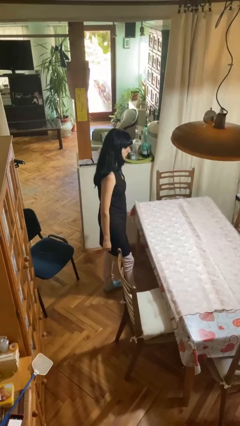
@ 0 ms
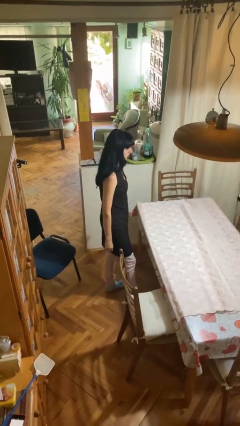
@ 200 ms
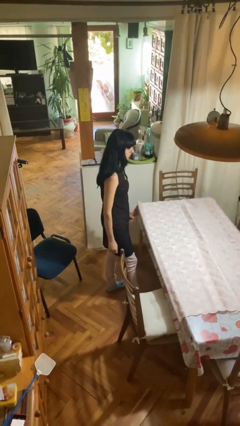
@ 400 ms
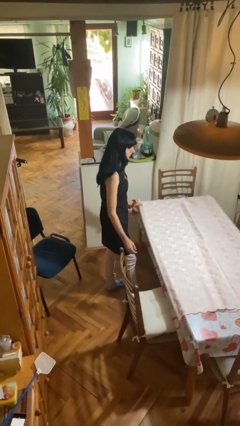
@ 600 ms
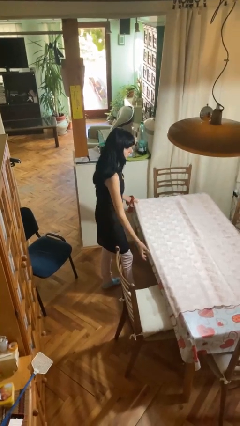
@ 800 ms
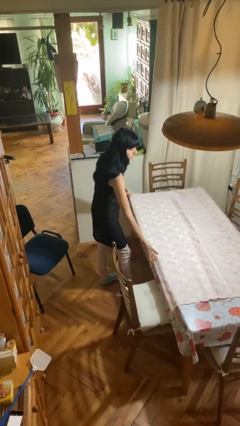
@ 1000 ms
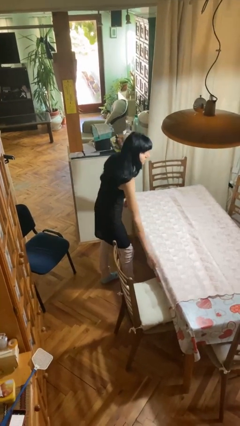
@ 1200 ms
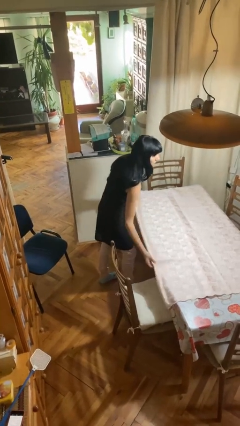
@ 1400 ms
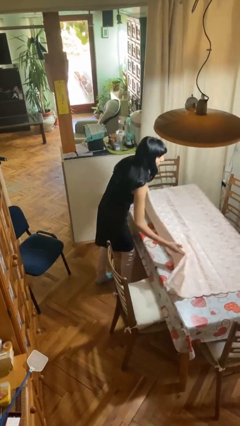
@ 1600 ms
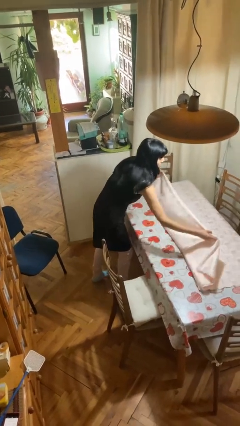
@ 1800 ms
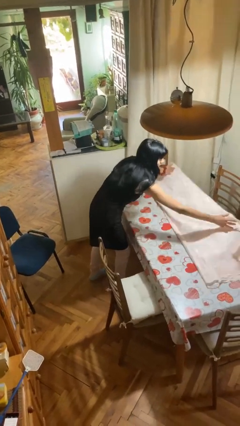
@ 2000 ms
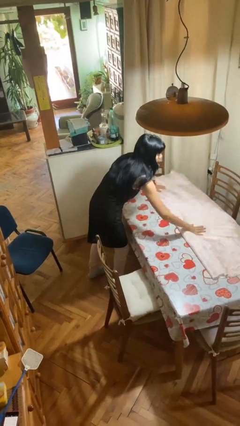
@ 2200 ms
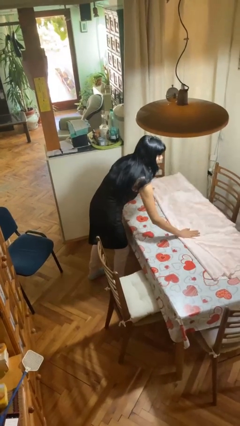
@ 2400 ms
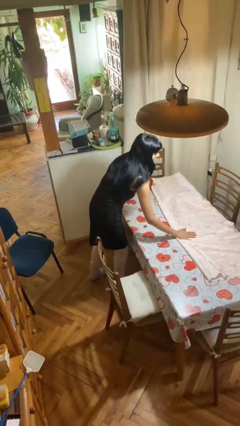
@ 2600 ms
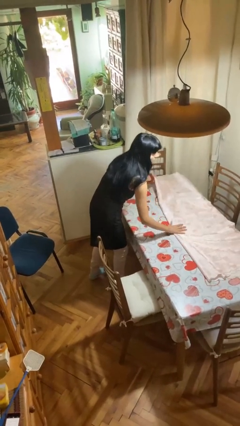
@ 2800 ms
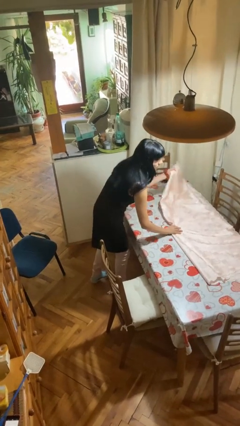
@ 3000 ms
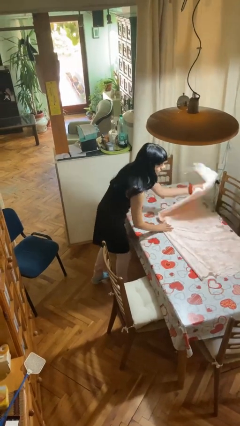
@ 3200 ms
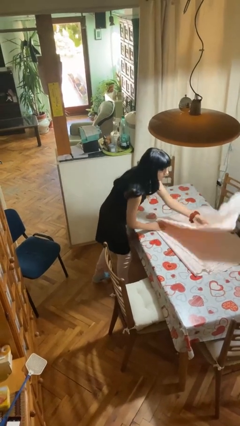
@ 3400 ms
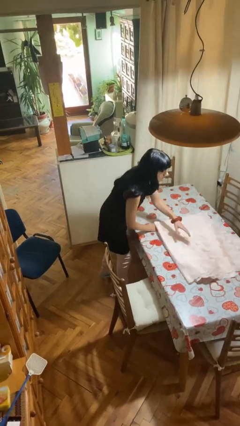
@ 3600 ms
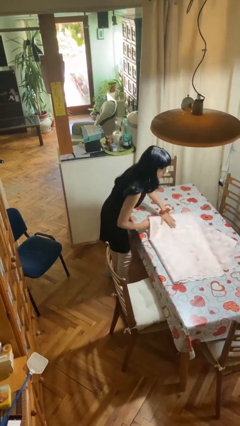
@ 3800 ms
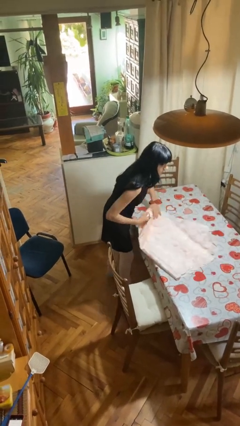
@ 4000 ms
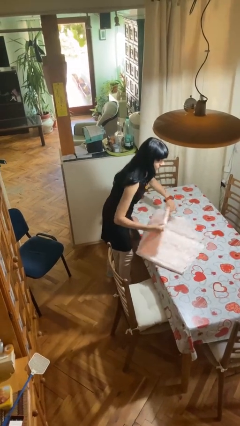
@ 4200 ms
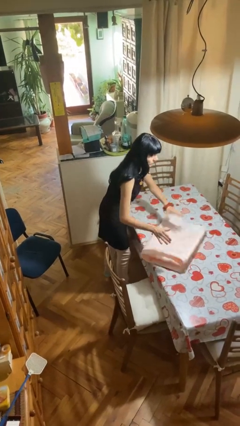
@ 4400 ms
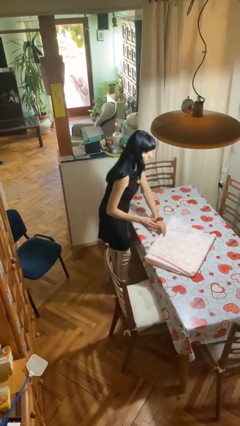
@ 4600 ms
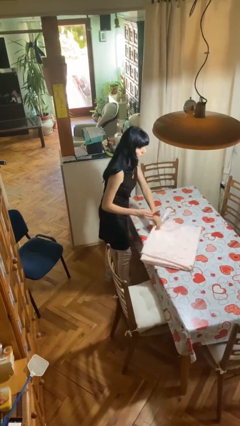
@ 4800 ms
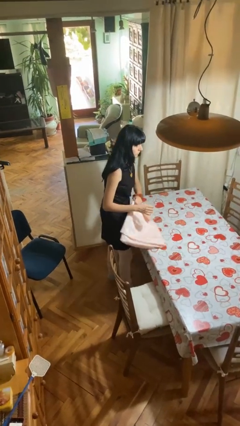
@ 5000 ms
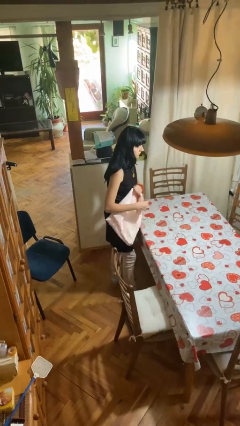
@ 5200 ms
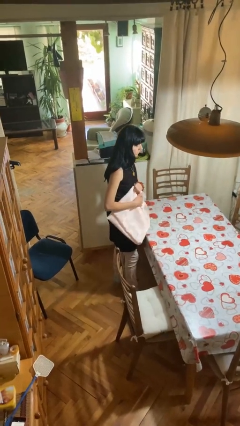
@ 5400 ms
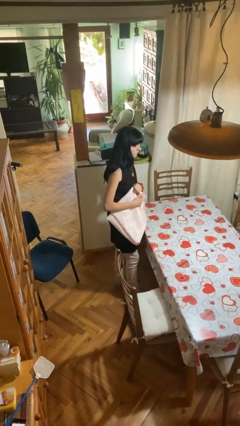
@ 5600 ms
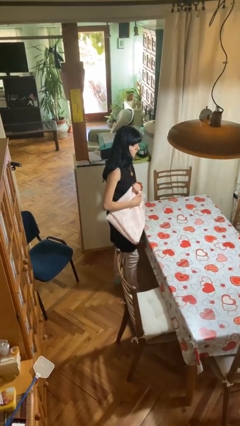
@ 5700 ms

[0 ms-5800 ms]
person folds tablecloth

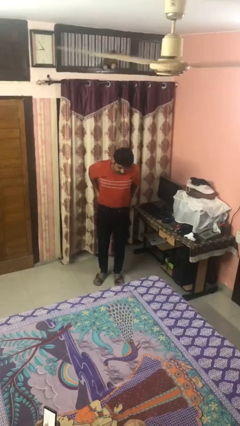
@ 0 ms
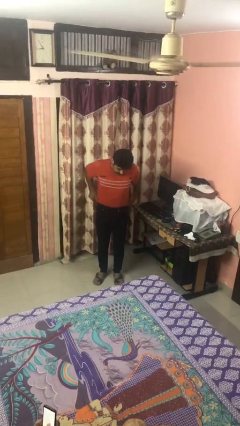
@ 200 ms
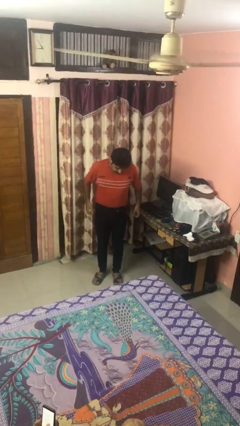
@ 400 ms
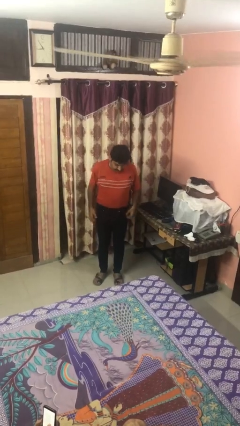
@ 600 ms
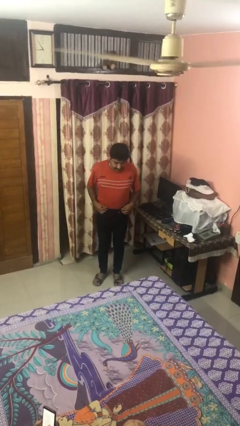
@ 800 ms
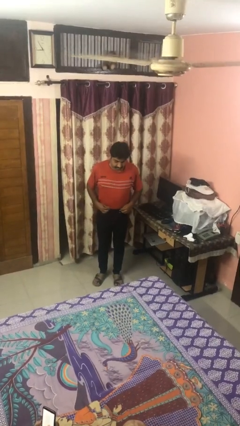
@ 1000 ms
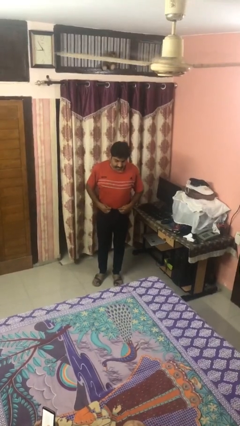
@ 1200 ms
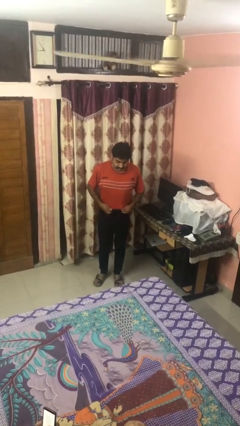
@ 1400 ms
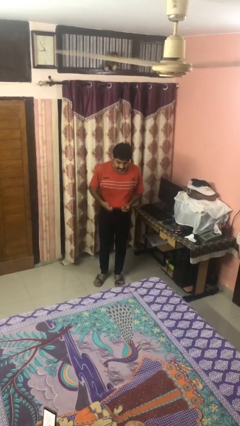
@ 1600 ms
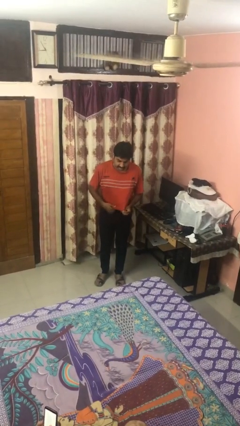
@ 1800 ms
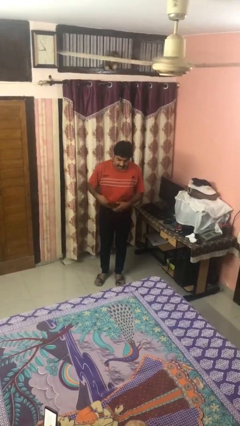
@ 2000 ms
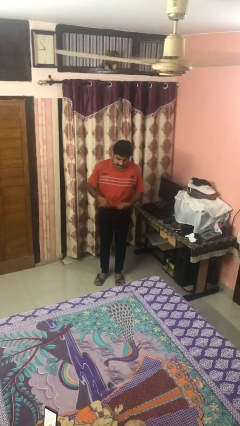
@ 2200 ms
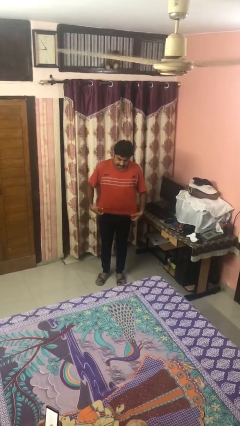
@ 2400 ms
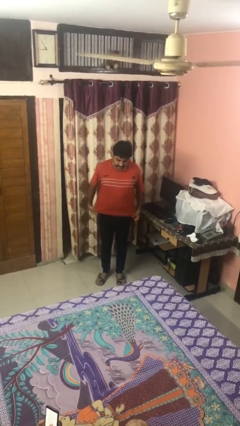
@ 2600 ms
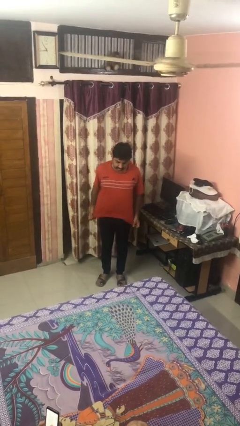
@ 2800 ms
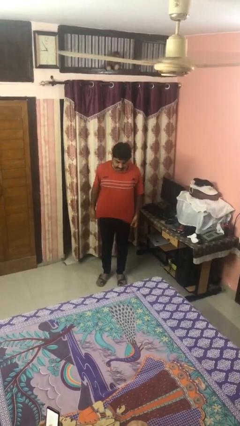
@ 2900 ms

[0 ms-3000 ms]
person untucks shirt

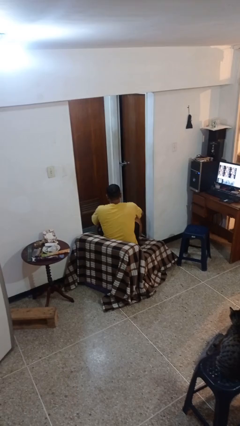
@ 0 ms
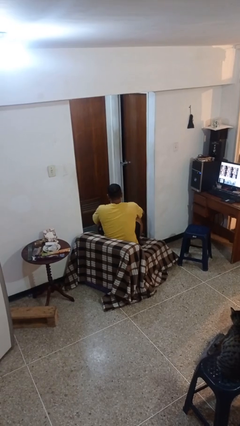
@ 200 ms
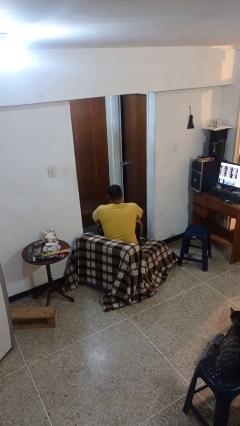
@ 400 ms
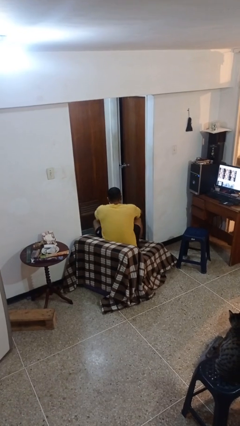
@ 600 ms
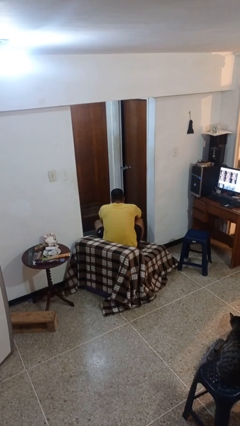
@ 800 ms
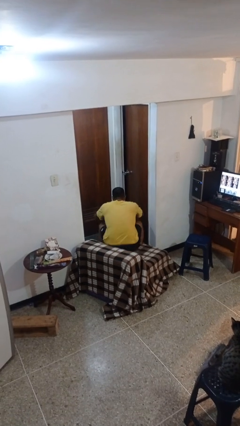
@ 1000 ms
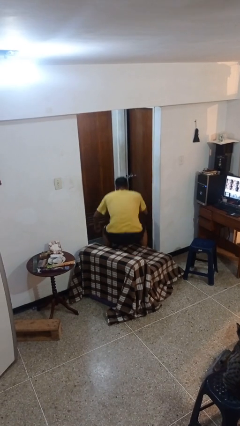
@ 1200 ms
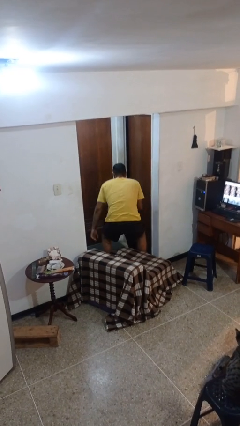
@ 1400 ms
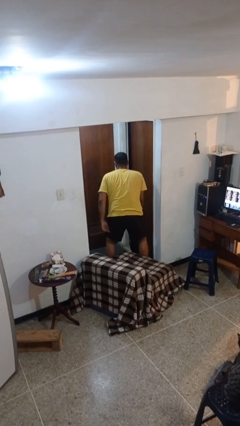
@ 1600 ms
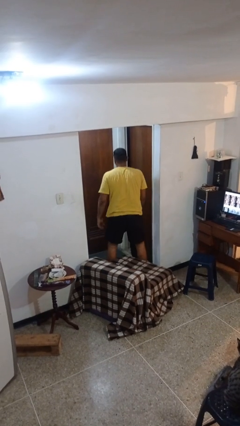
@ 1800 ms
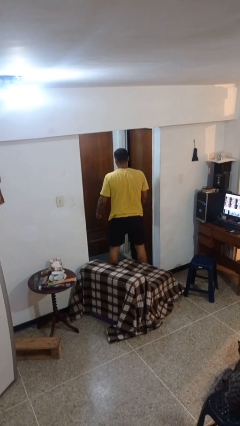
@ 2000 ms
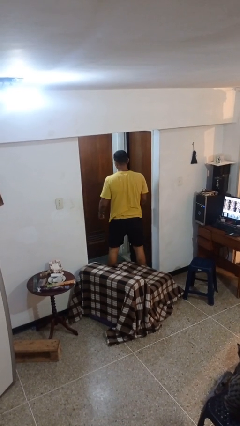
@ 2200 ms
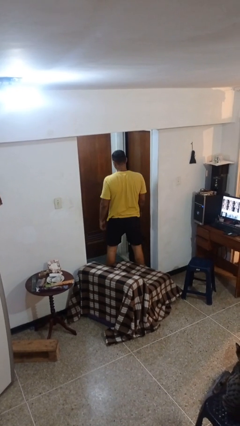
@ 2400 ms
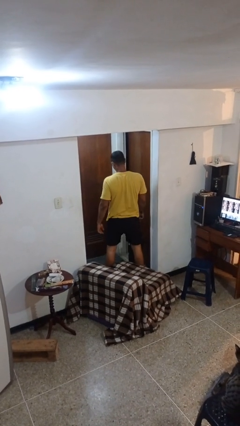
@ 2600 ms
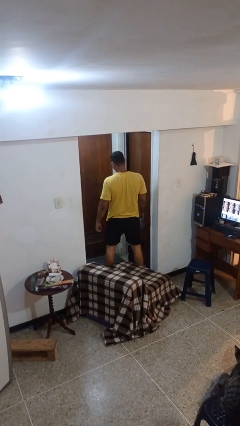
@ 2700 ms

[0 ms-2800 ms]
person stands up

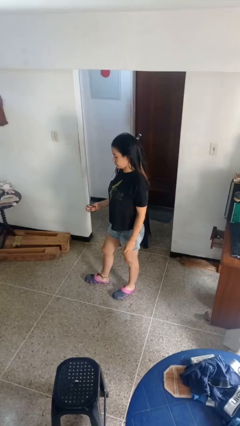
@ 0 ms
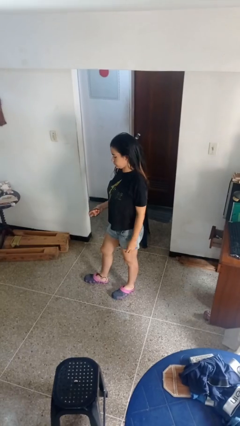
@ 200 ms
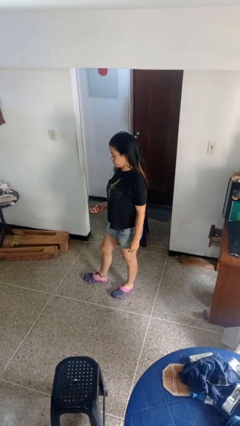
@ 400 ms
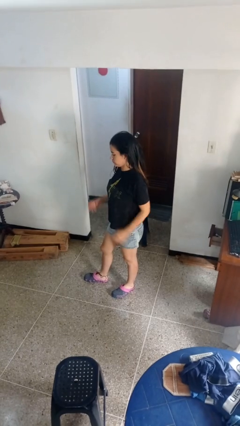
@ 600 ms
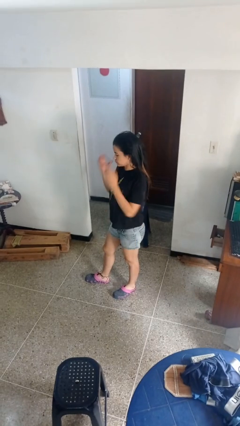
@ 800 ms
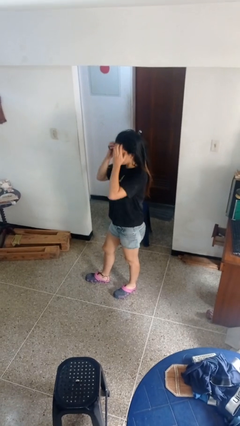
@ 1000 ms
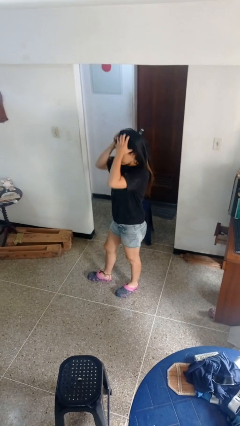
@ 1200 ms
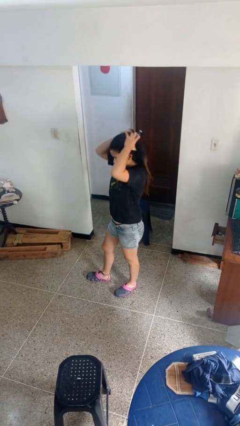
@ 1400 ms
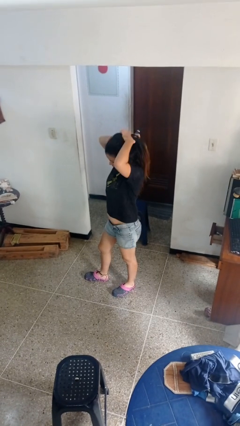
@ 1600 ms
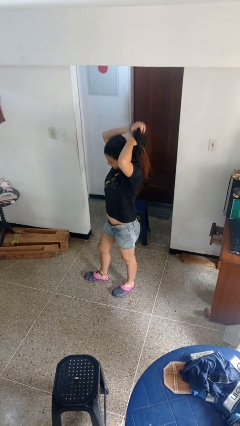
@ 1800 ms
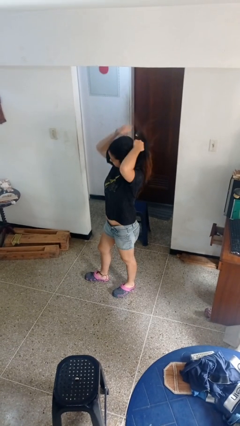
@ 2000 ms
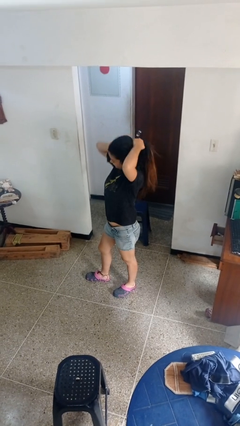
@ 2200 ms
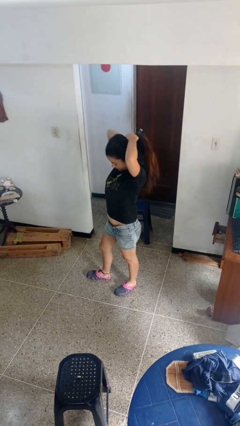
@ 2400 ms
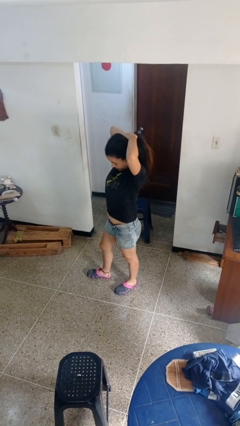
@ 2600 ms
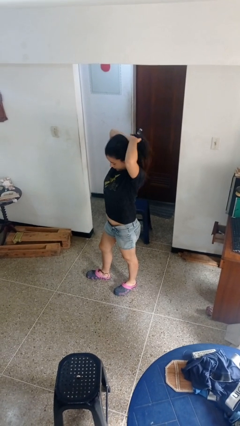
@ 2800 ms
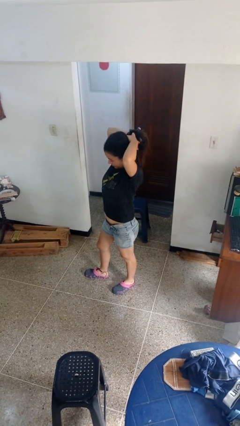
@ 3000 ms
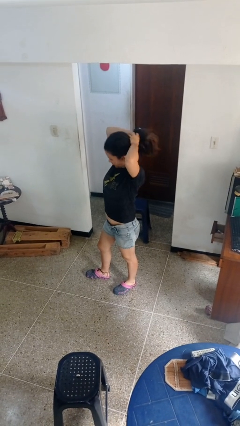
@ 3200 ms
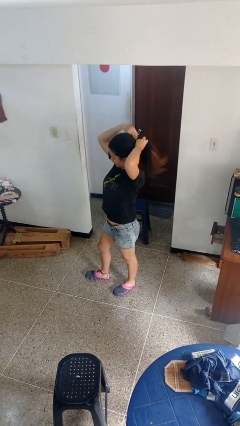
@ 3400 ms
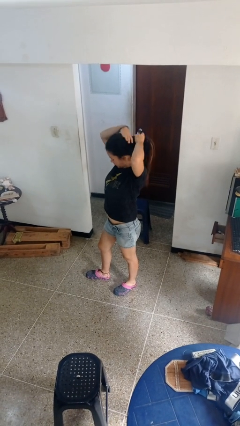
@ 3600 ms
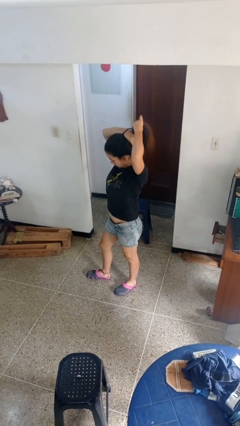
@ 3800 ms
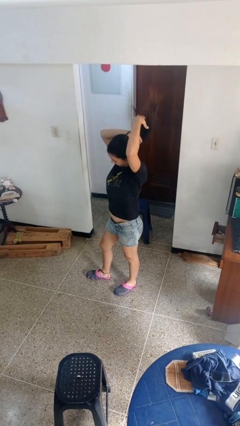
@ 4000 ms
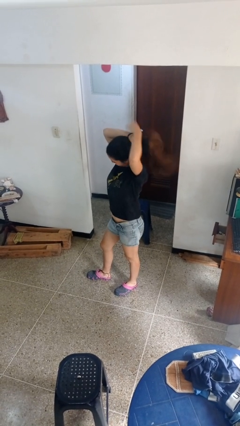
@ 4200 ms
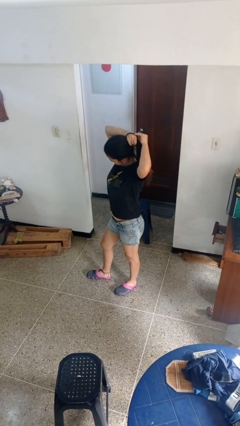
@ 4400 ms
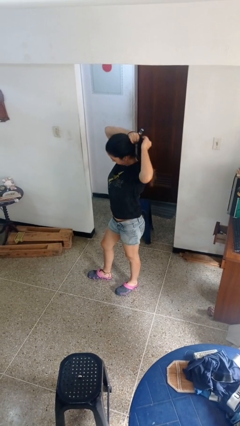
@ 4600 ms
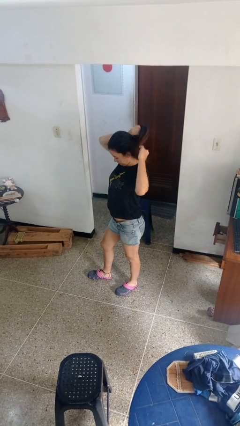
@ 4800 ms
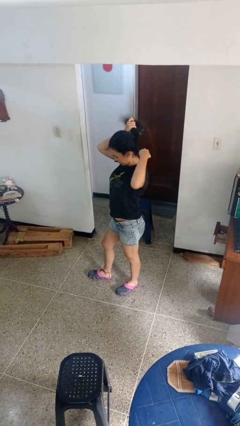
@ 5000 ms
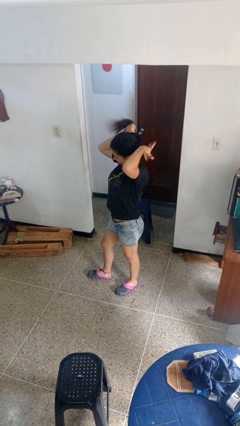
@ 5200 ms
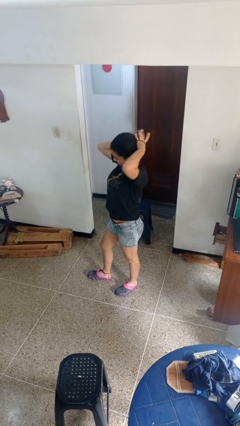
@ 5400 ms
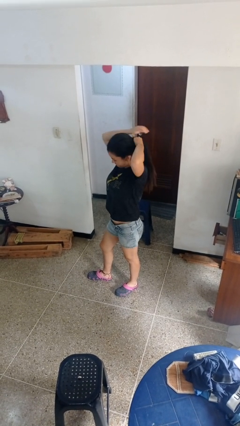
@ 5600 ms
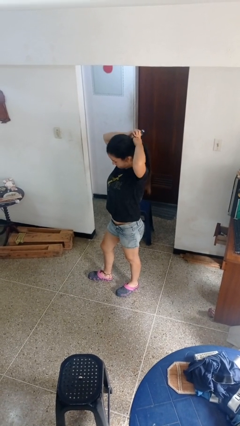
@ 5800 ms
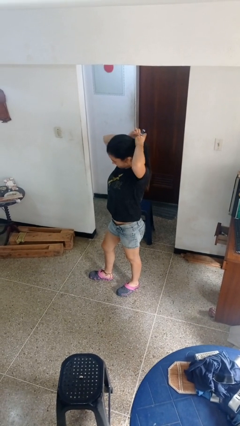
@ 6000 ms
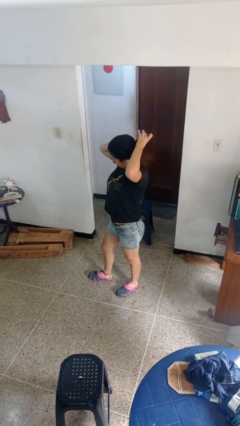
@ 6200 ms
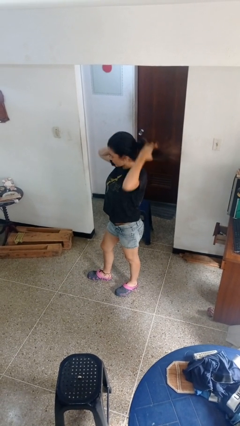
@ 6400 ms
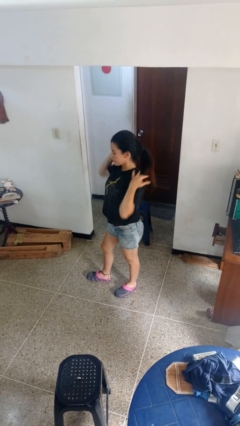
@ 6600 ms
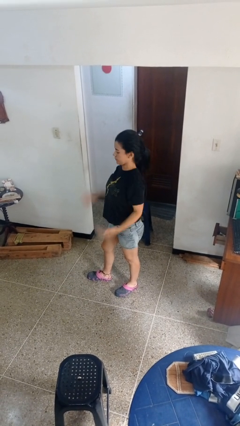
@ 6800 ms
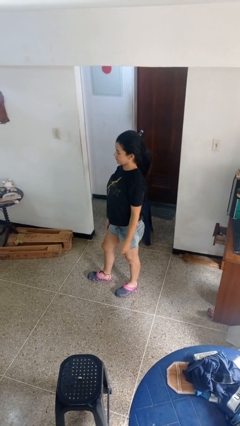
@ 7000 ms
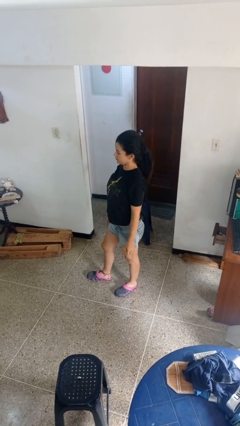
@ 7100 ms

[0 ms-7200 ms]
person puts hair in ponytail
